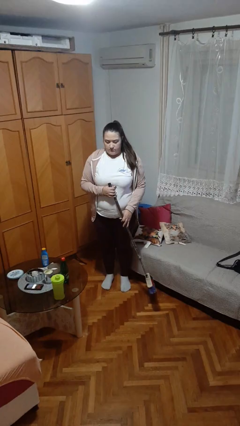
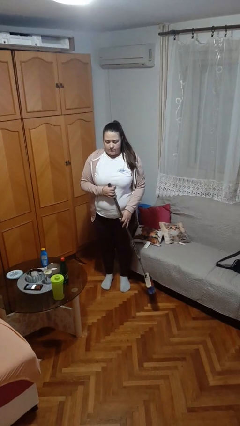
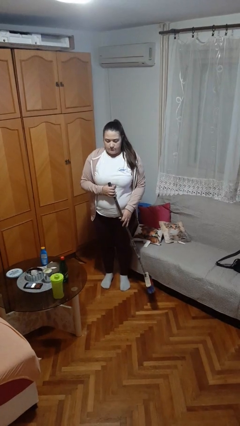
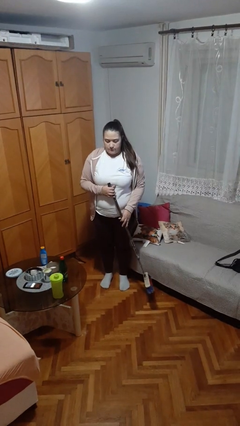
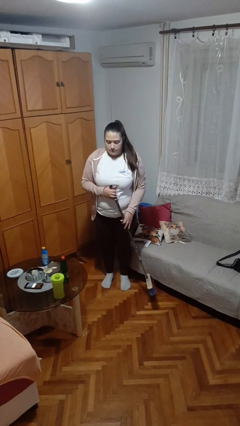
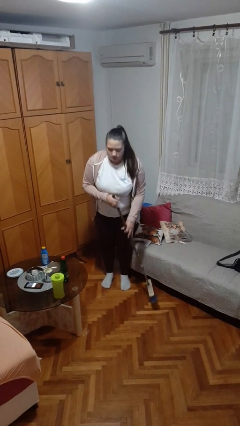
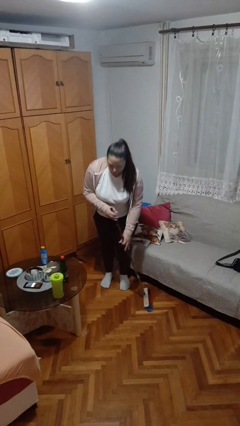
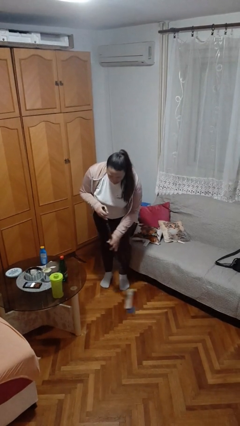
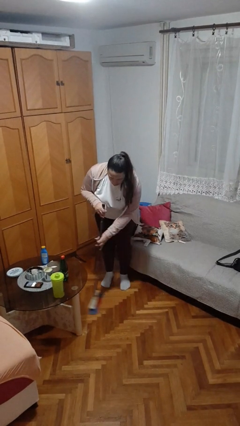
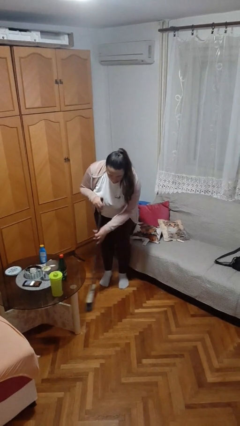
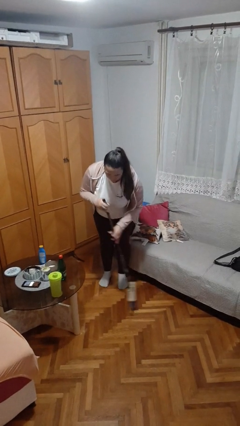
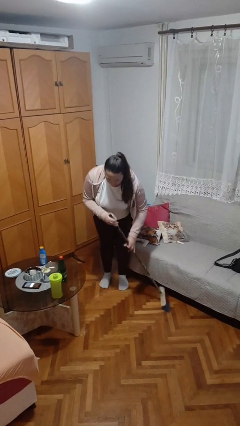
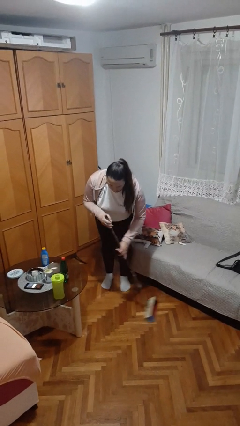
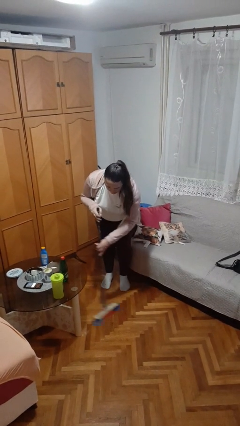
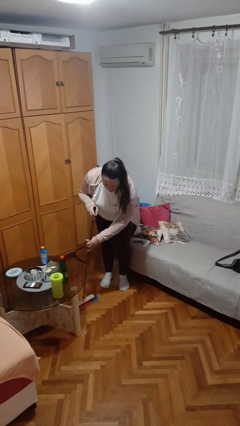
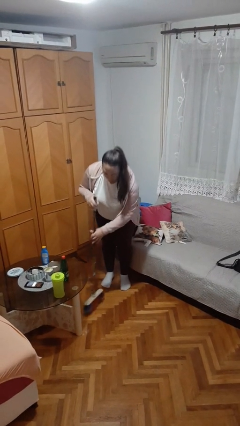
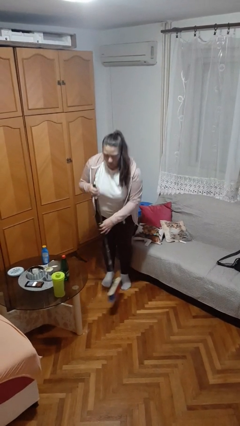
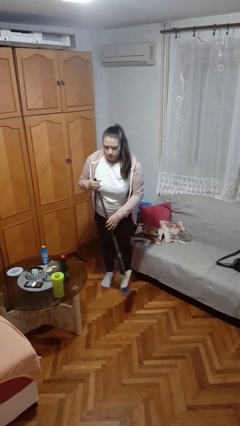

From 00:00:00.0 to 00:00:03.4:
person sweeps floor

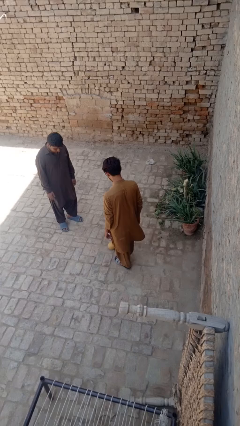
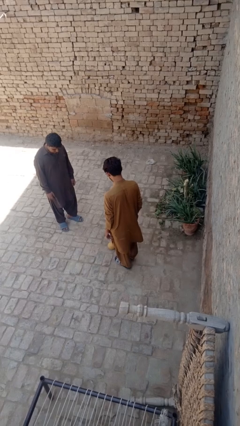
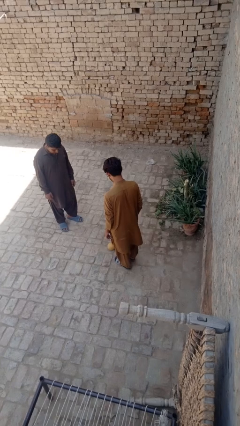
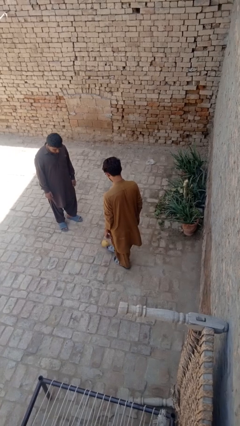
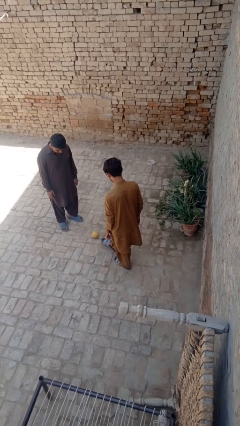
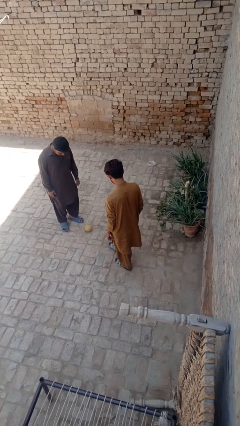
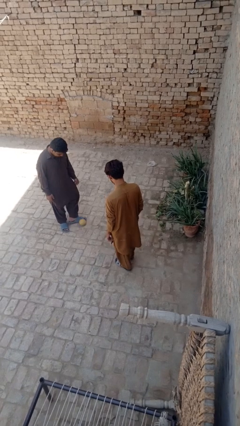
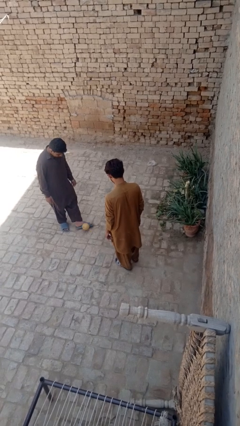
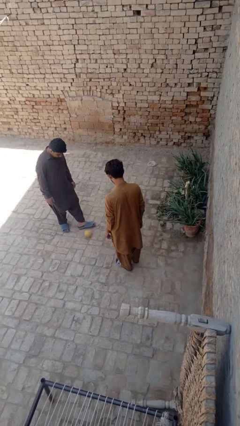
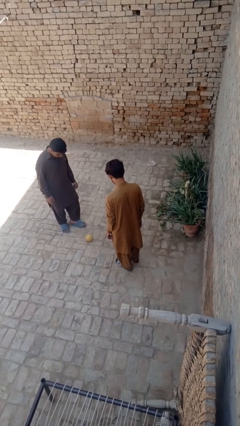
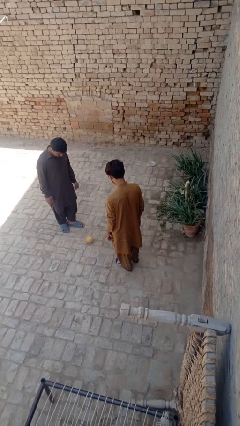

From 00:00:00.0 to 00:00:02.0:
person kicks object to person

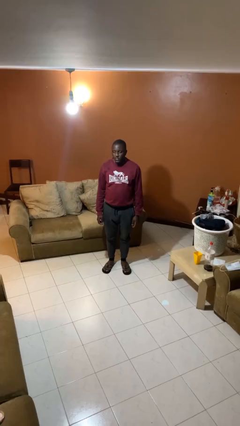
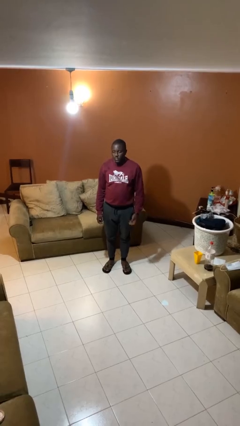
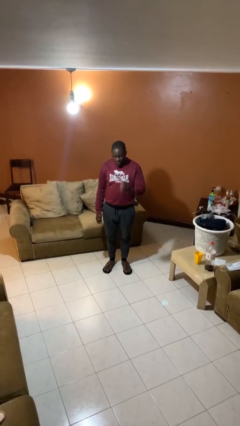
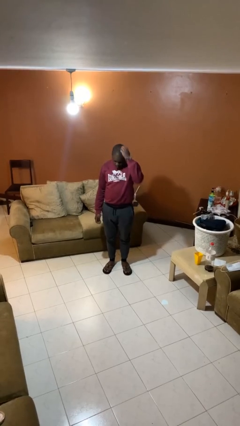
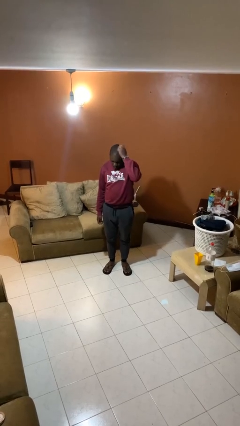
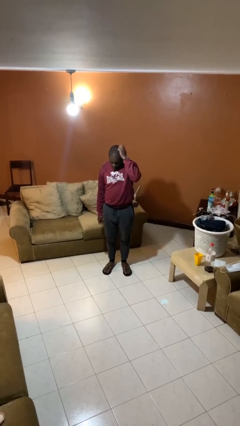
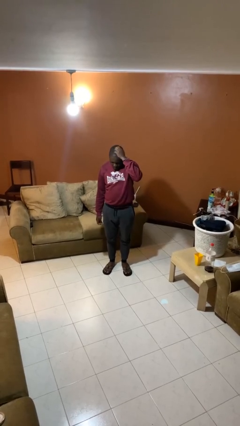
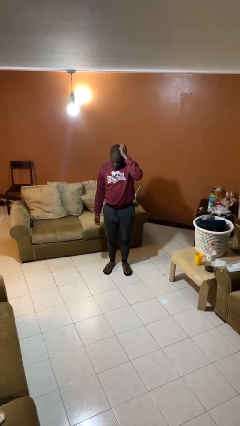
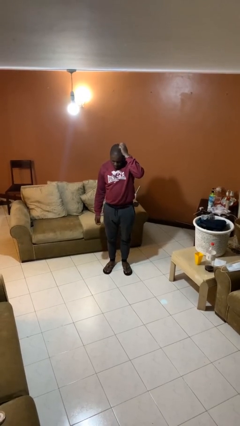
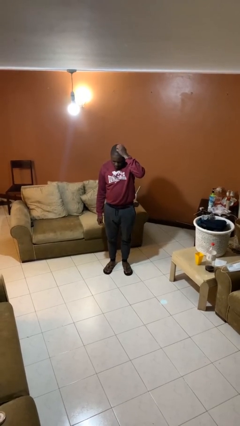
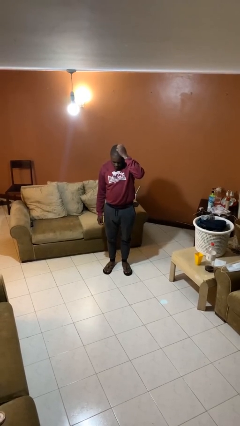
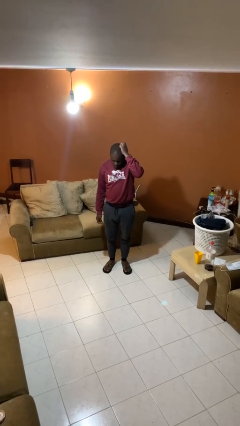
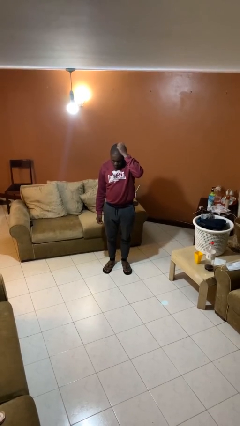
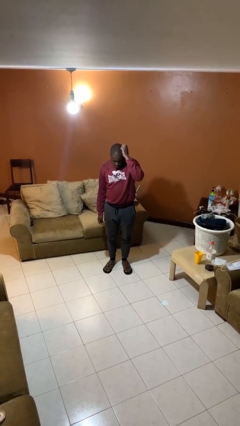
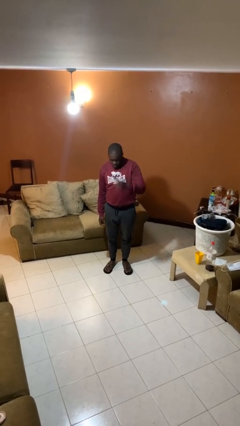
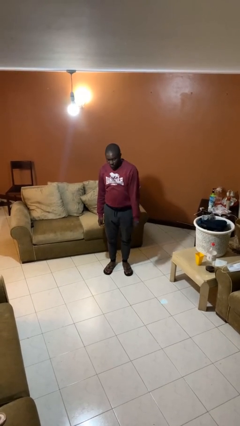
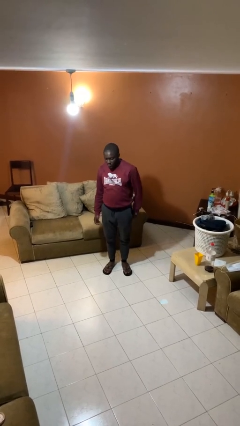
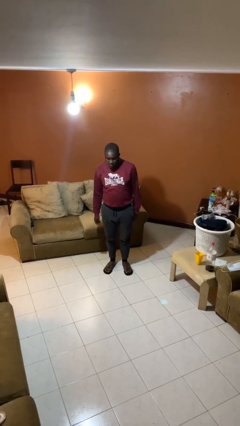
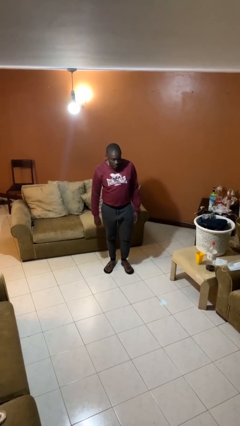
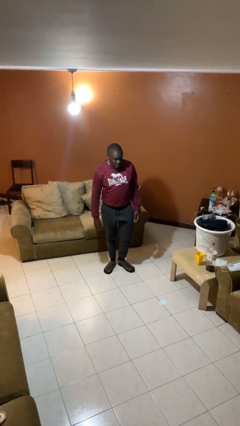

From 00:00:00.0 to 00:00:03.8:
person scratches face

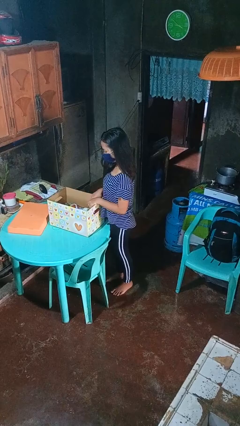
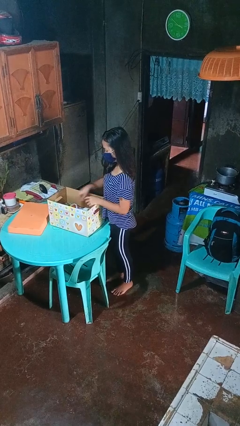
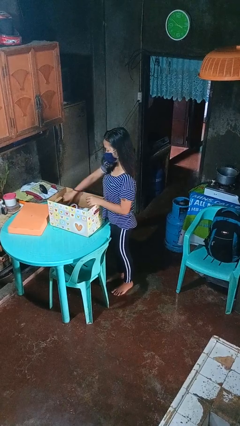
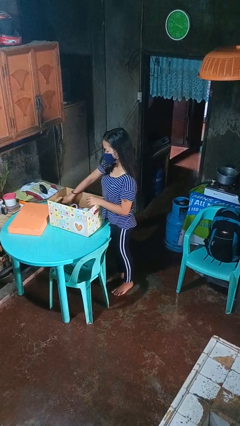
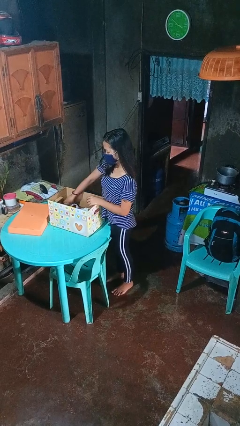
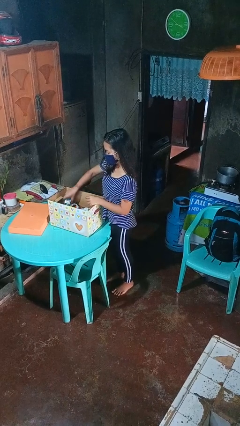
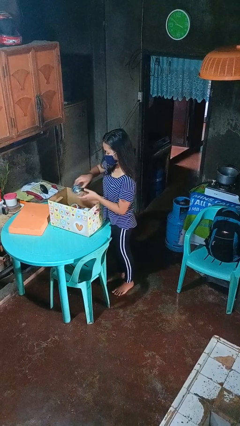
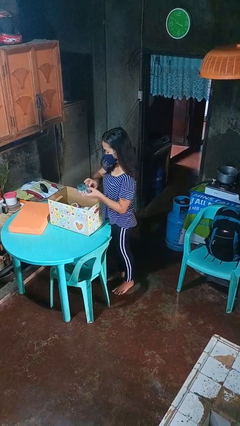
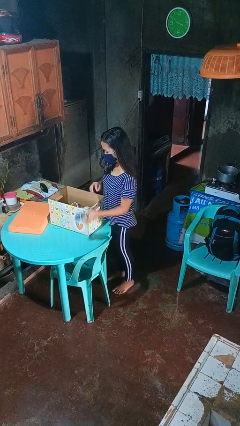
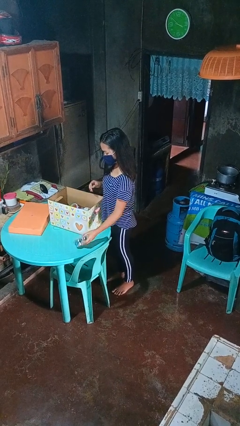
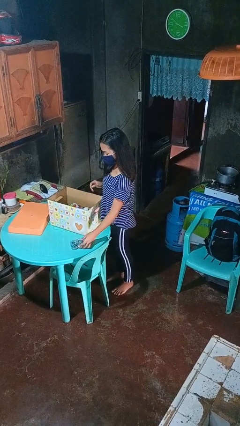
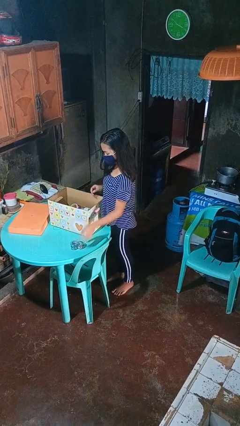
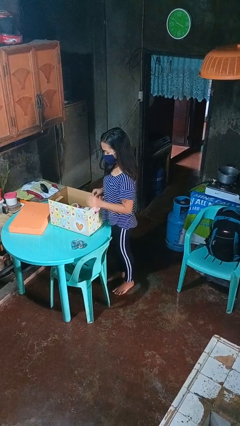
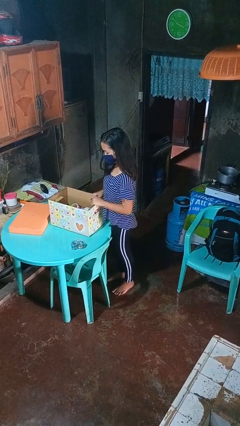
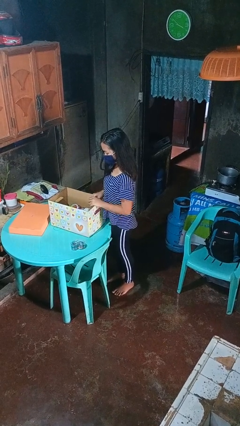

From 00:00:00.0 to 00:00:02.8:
person takes object from box

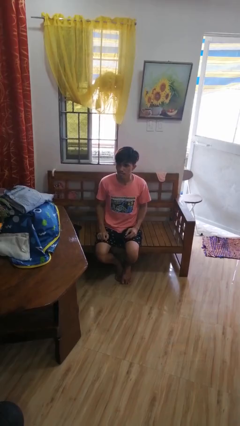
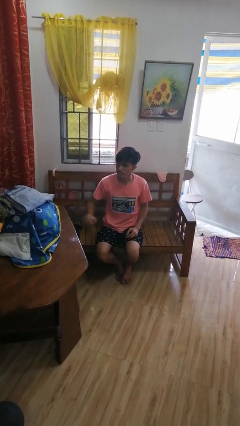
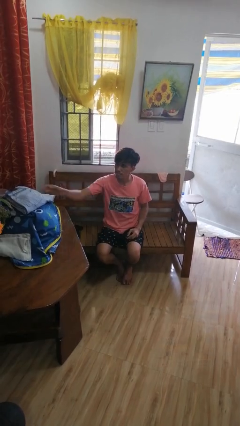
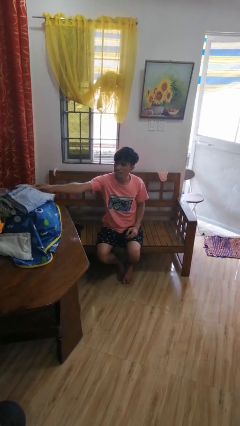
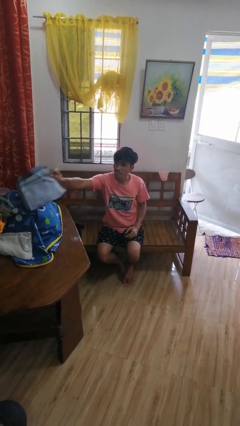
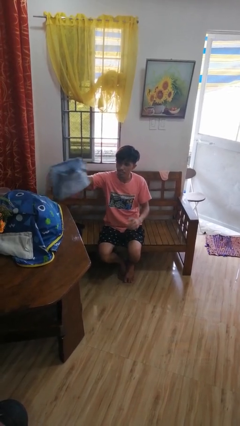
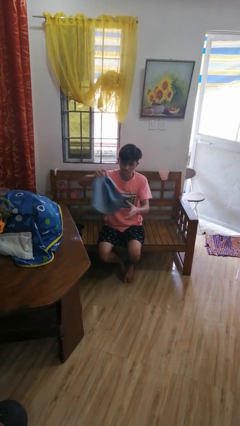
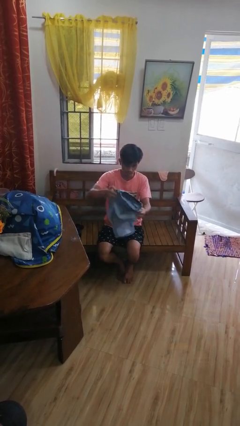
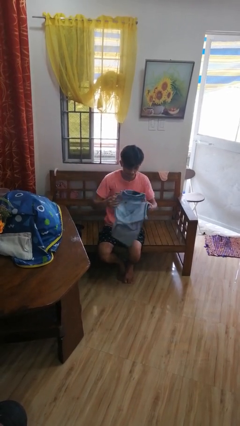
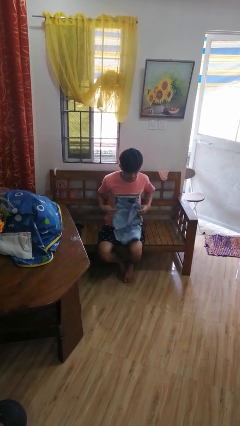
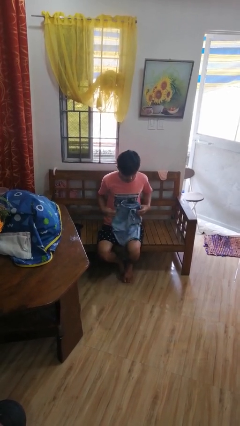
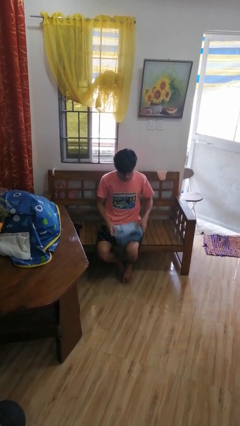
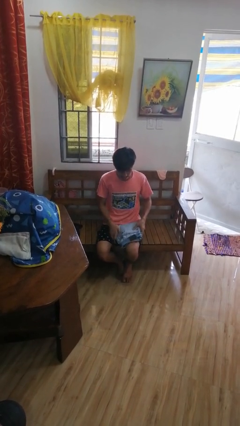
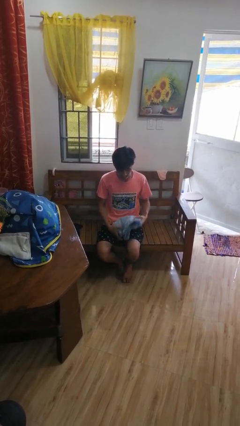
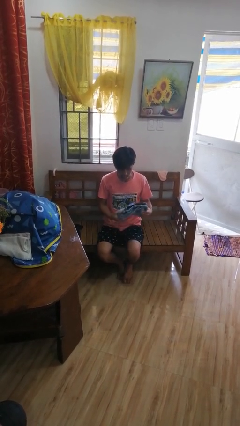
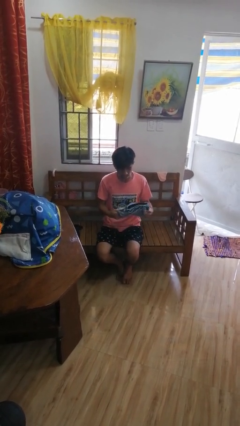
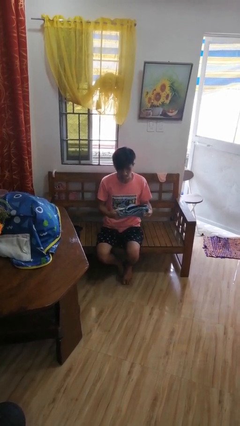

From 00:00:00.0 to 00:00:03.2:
person folds pants

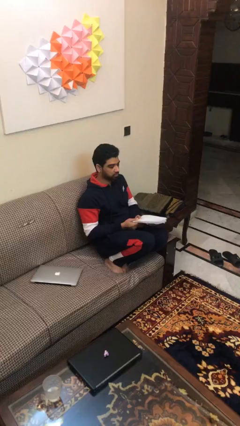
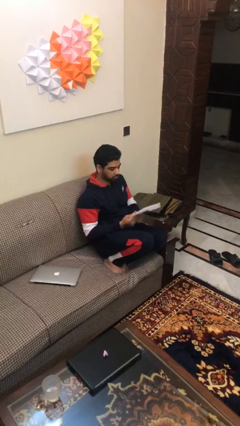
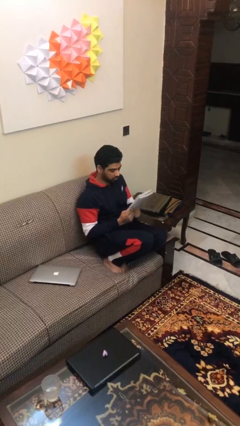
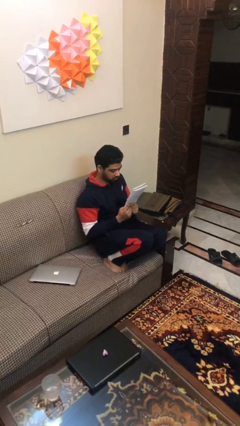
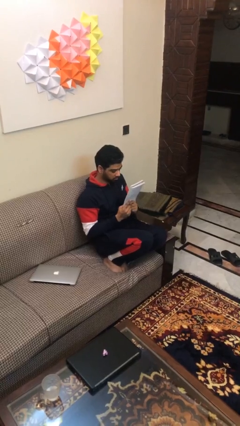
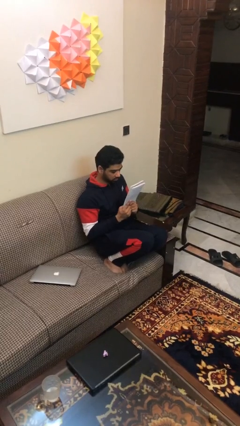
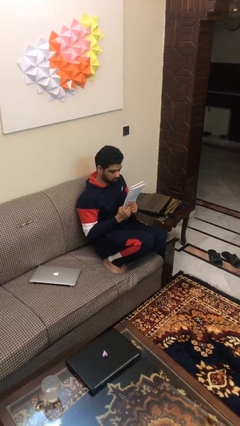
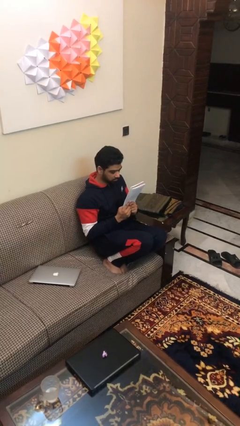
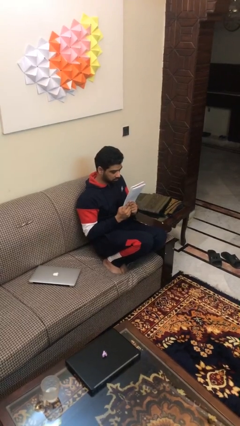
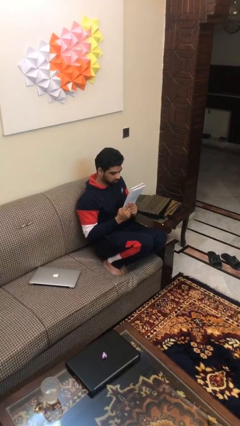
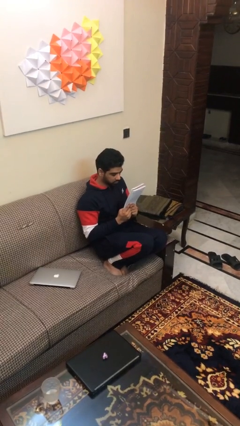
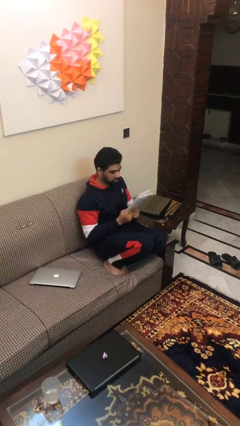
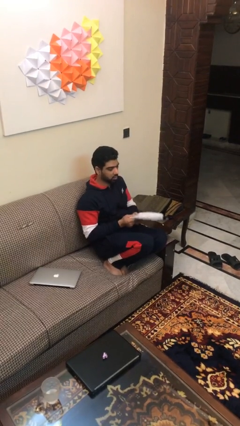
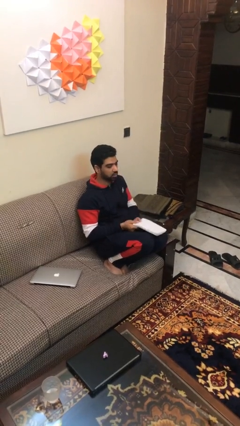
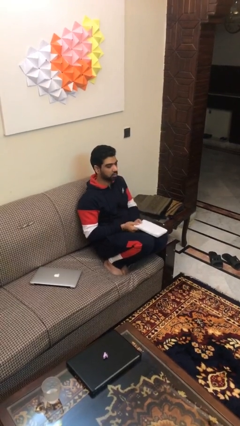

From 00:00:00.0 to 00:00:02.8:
person reads document
